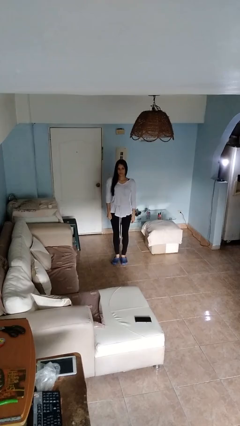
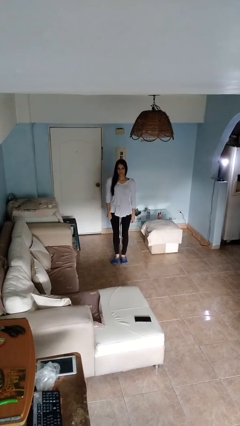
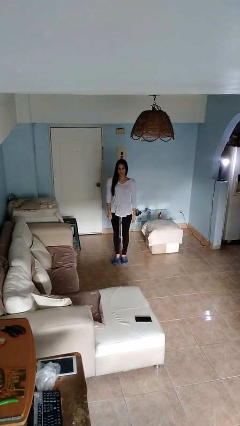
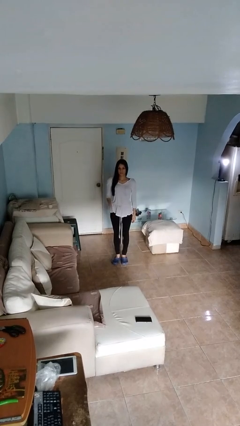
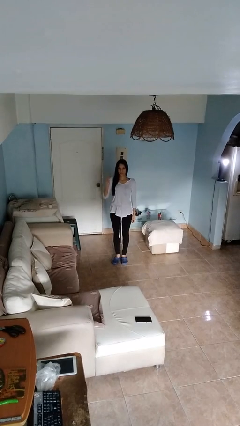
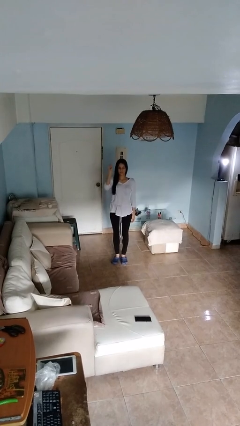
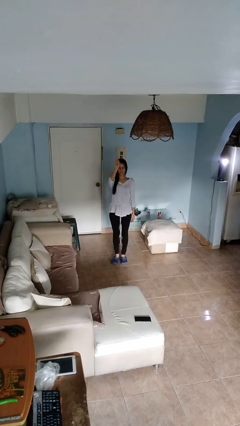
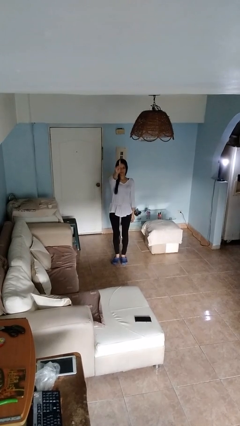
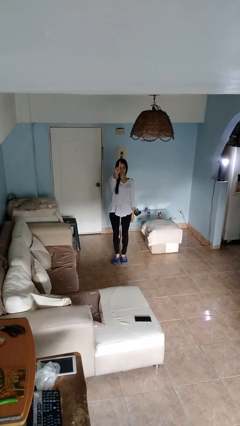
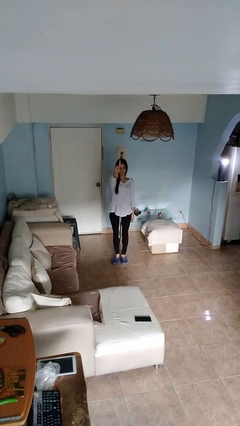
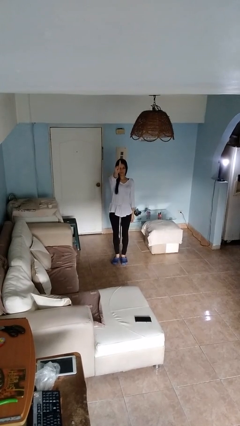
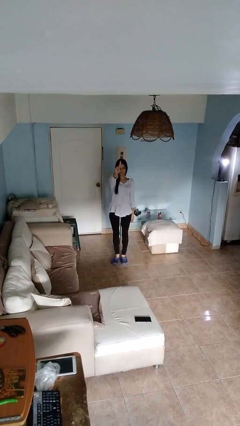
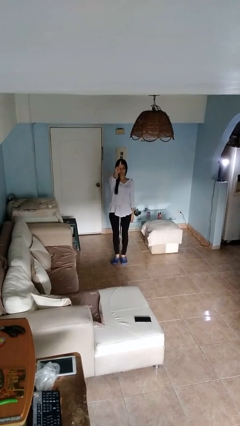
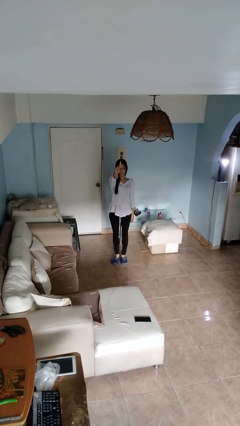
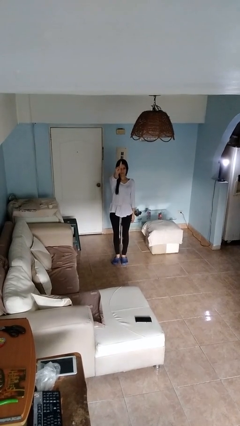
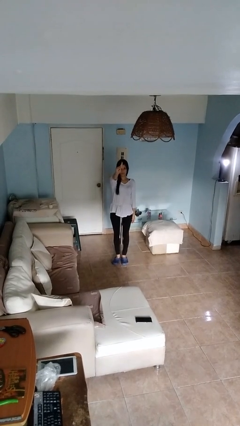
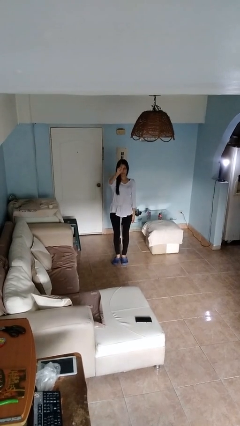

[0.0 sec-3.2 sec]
person gestures number one

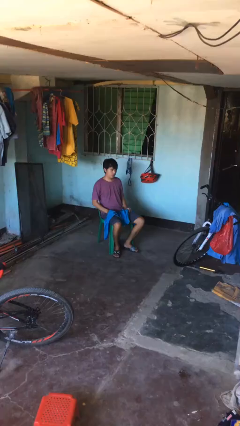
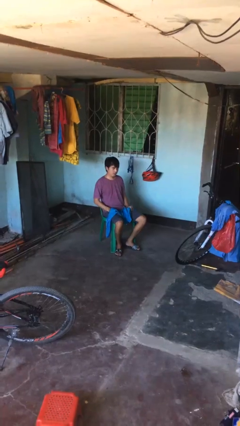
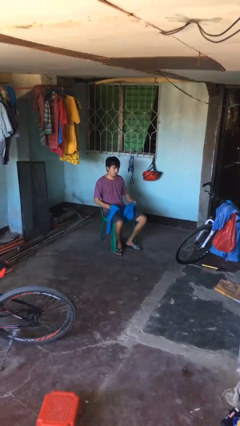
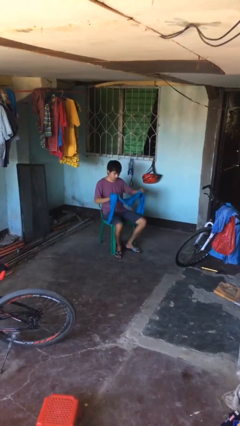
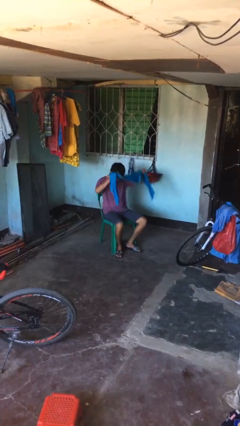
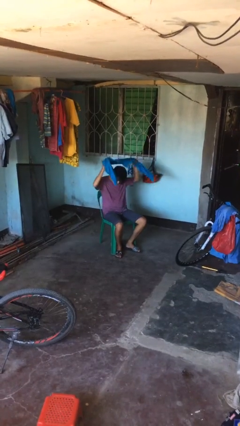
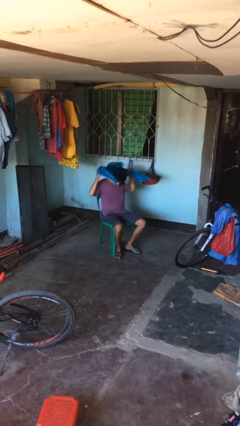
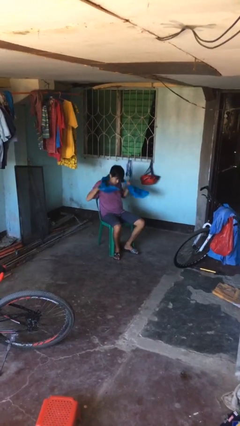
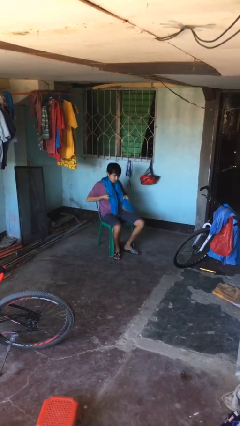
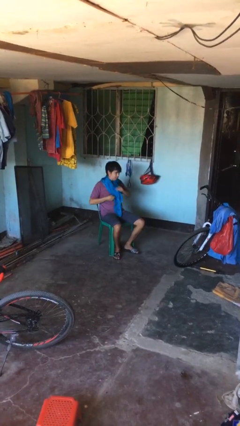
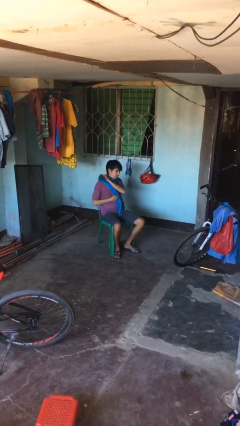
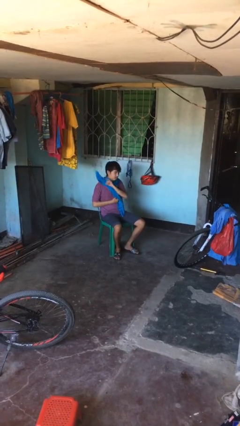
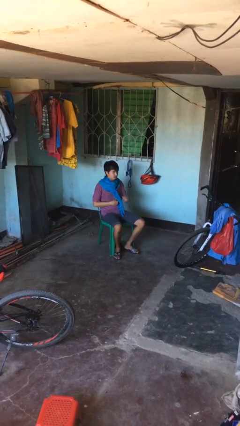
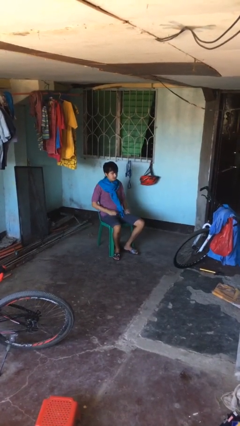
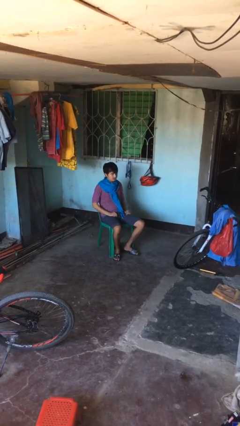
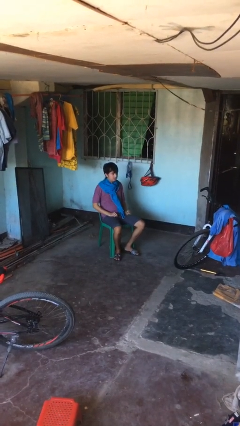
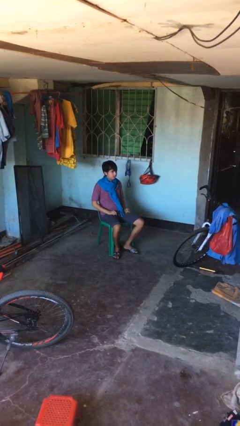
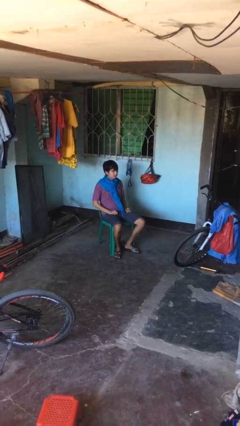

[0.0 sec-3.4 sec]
person puts on scarf

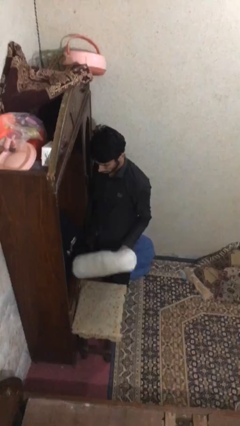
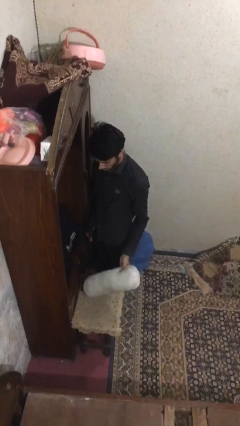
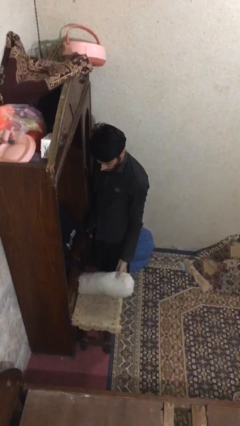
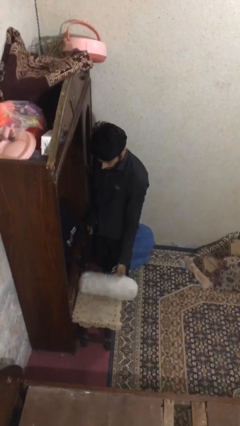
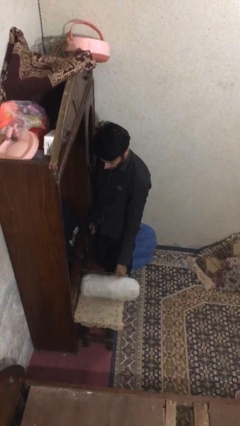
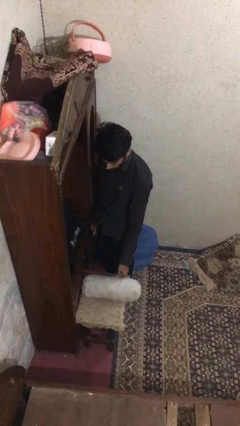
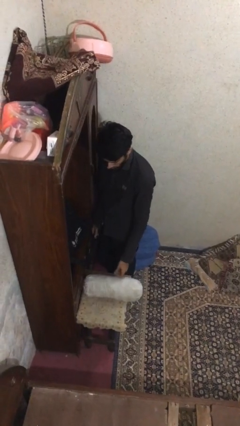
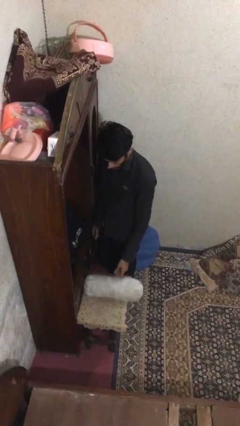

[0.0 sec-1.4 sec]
person puts down object on table

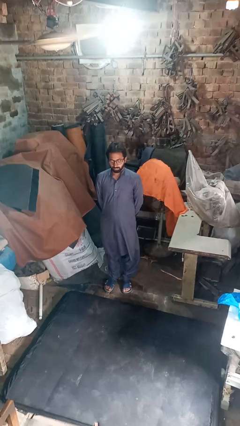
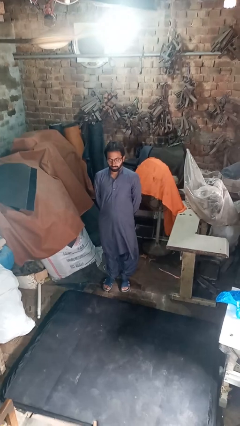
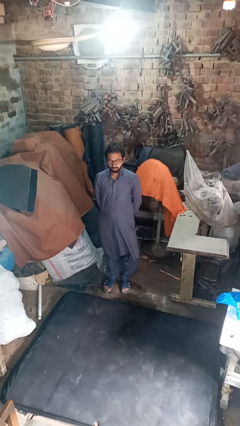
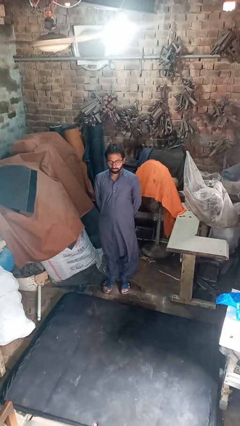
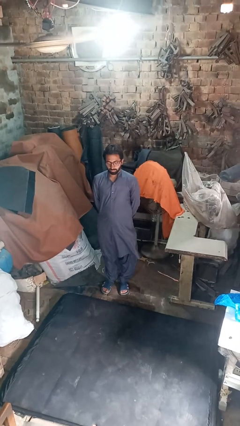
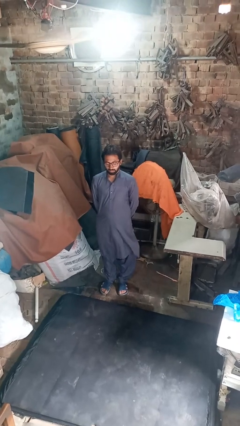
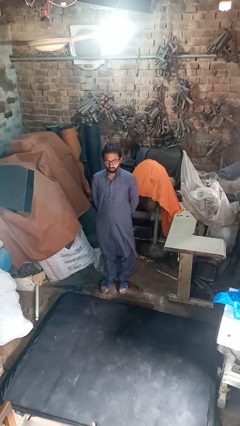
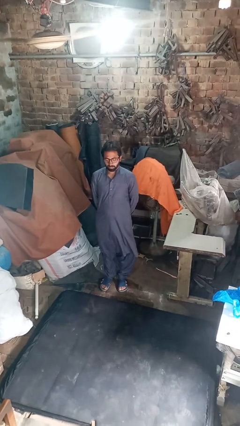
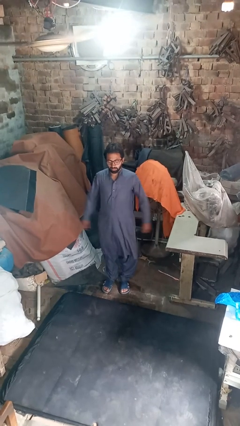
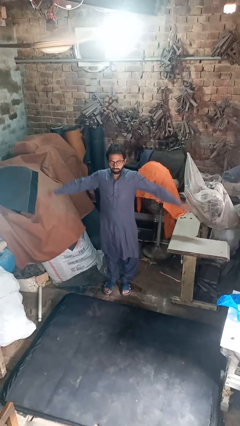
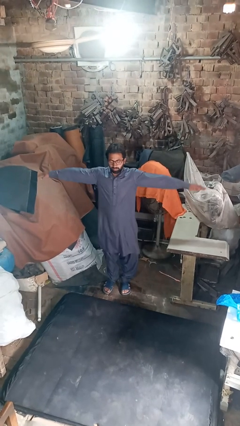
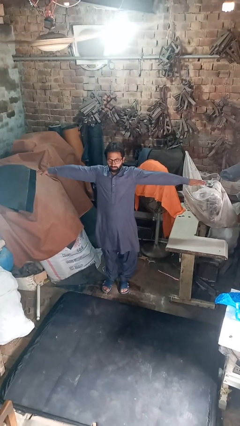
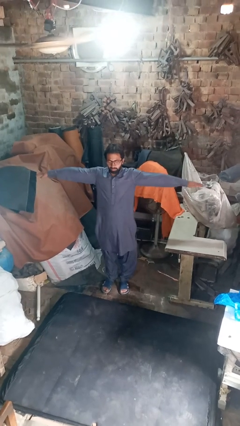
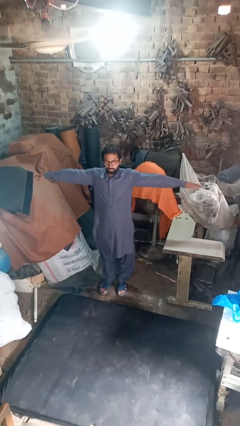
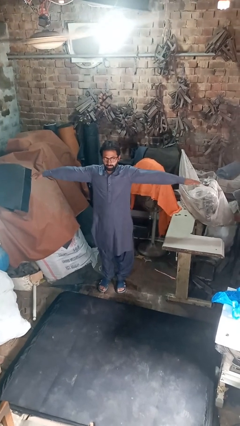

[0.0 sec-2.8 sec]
person stretches arms to side

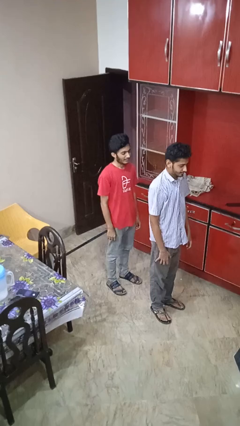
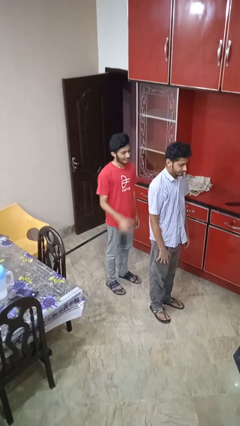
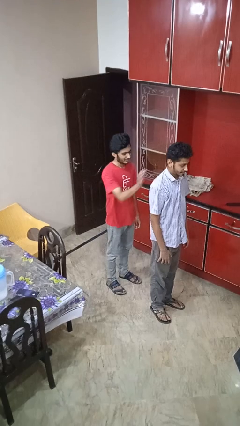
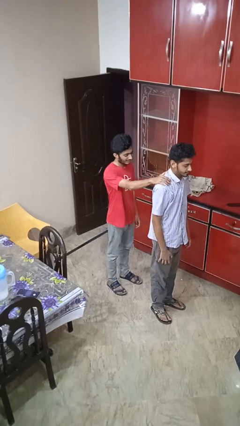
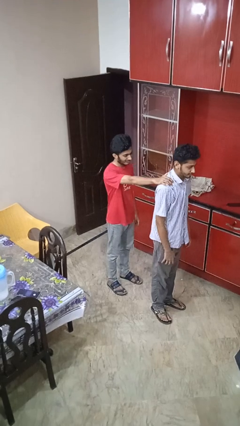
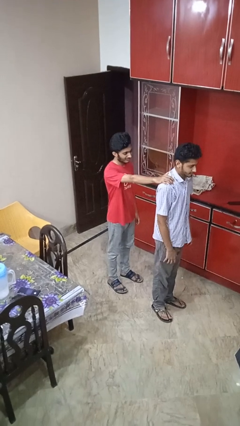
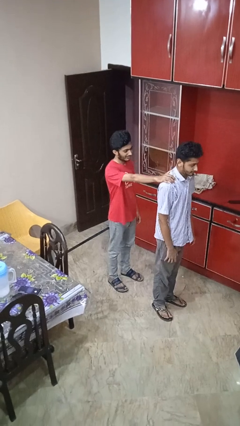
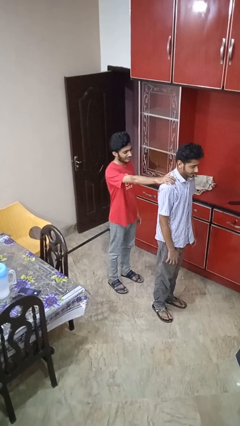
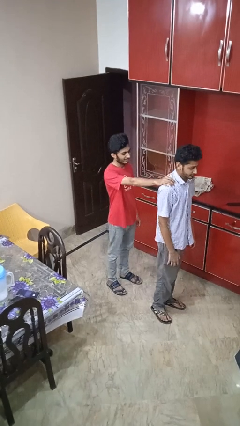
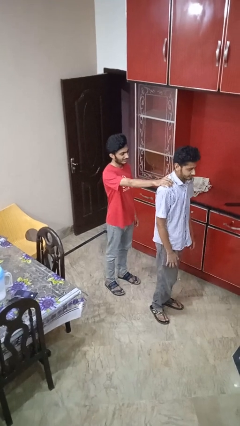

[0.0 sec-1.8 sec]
person grabs person by shoulder

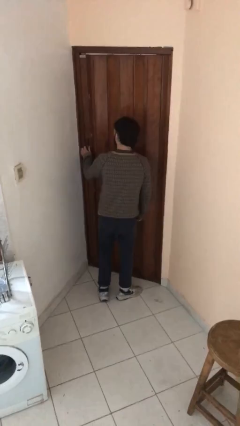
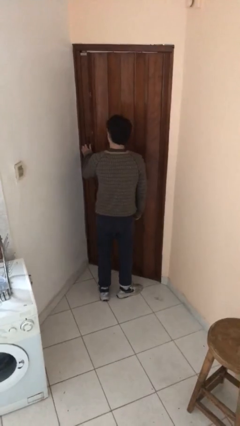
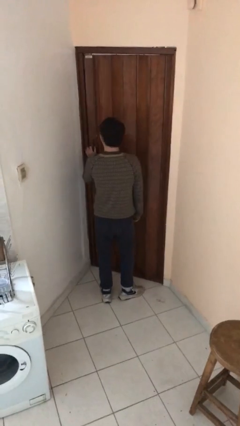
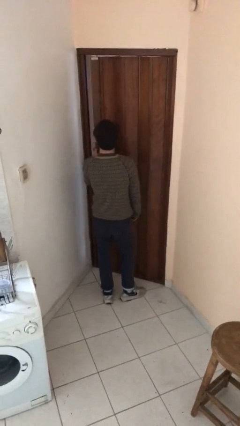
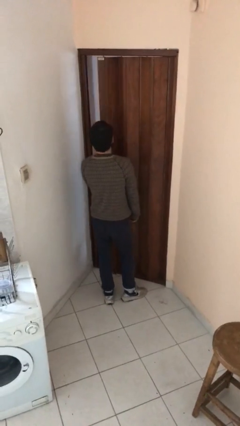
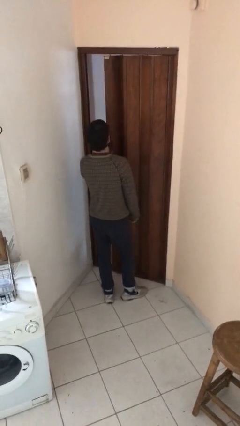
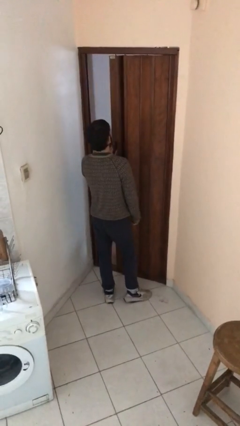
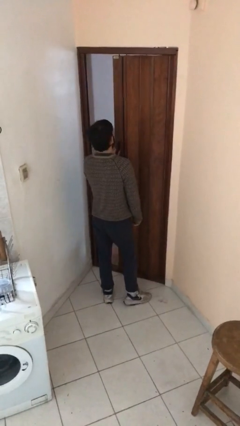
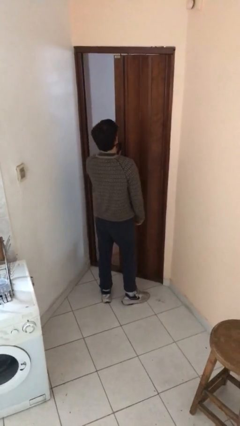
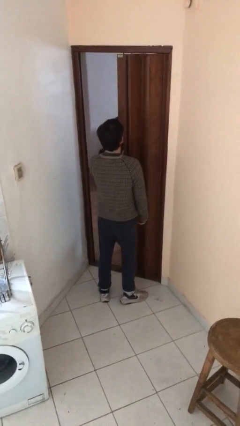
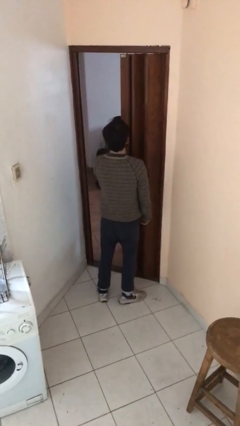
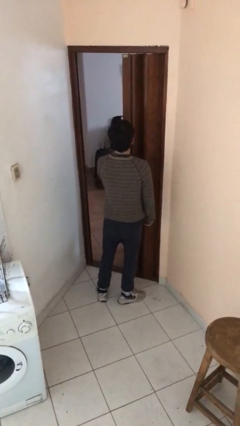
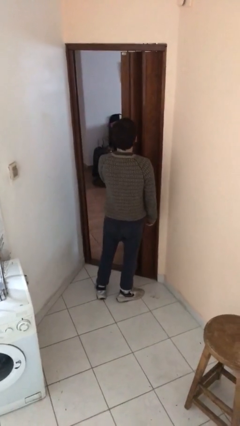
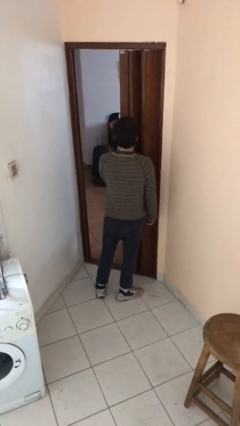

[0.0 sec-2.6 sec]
person opens sliding door

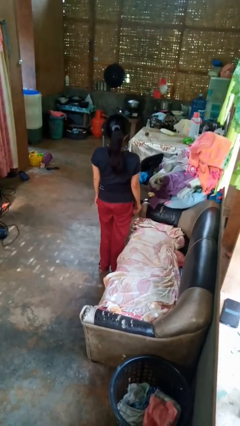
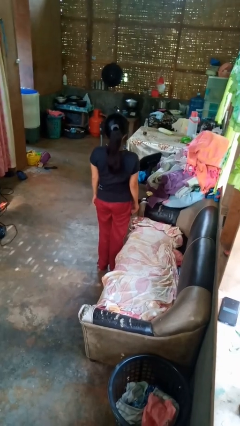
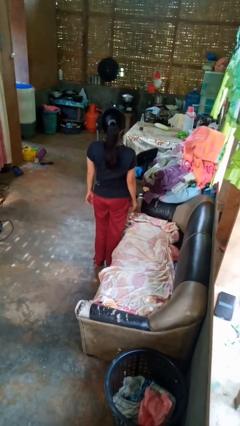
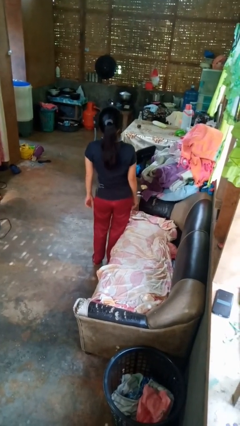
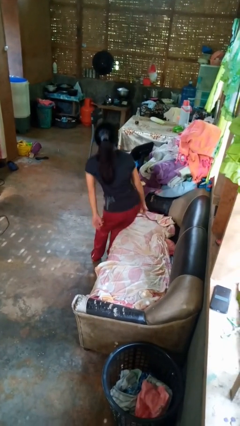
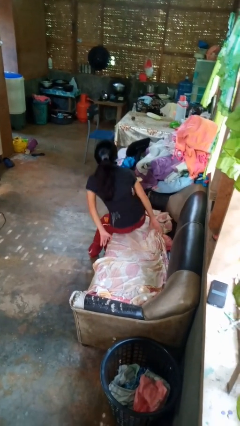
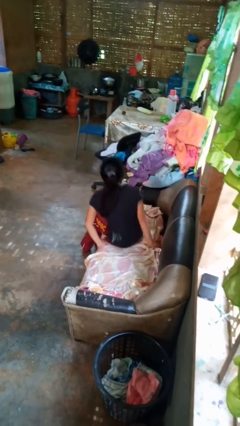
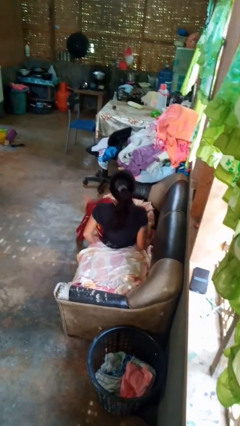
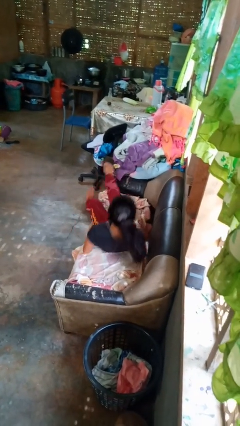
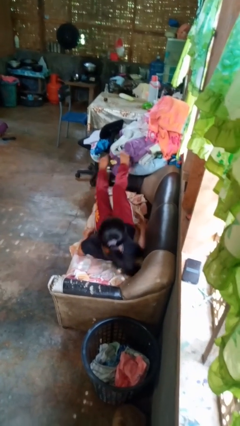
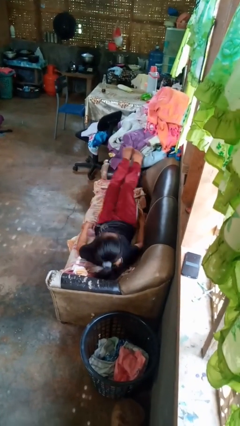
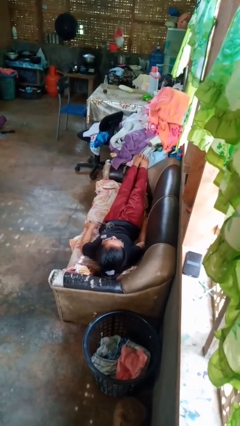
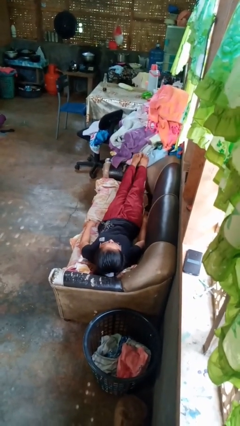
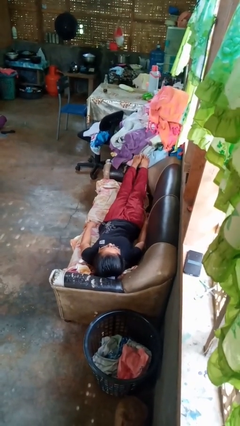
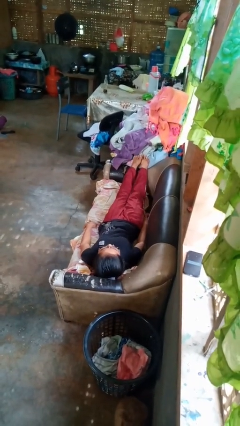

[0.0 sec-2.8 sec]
person lies down on couch
